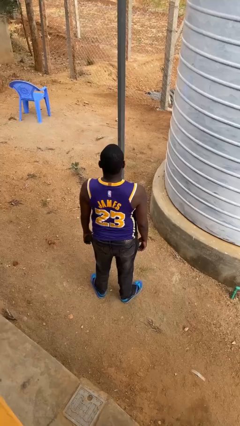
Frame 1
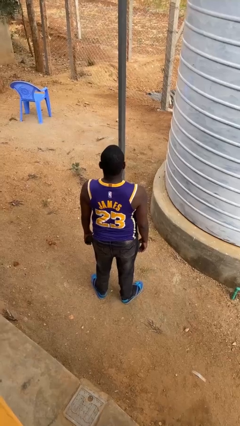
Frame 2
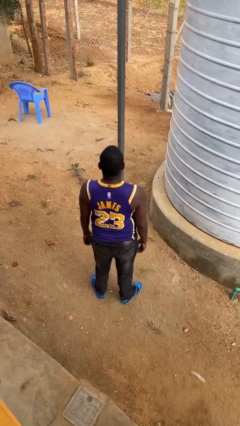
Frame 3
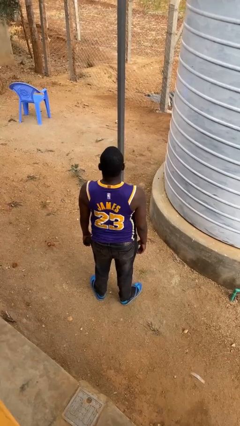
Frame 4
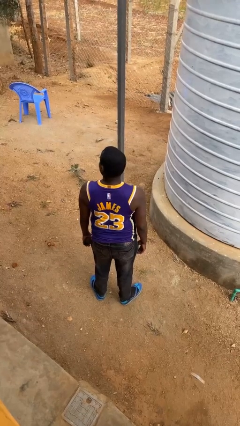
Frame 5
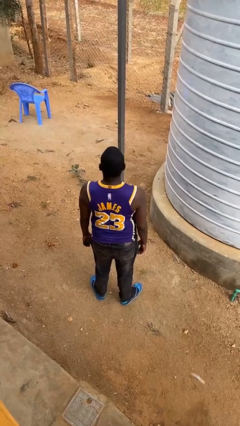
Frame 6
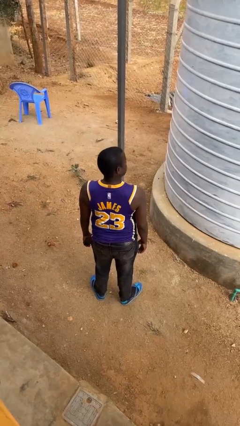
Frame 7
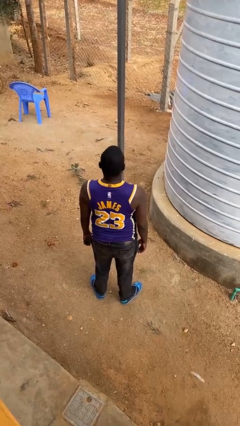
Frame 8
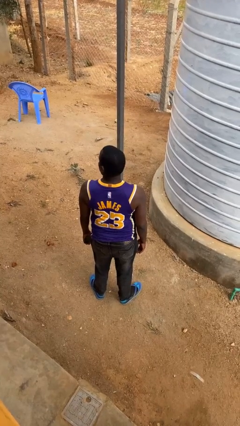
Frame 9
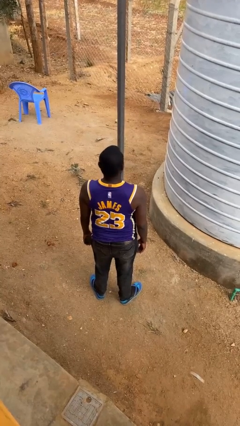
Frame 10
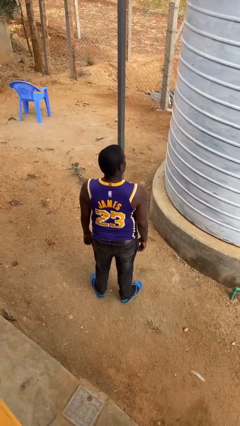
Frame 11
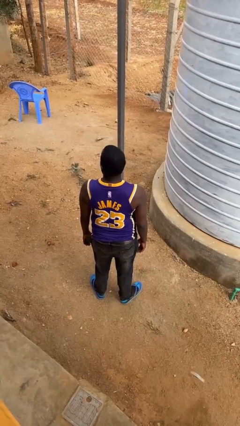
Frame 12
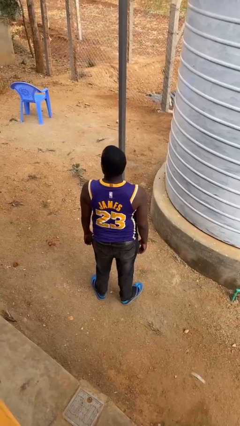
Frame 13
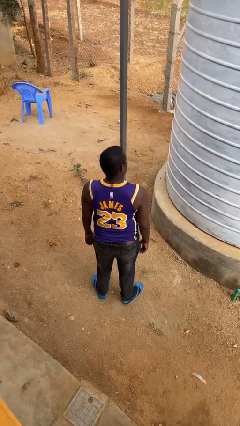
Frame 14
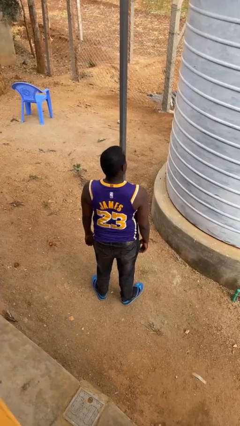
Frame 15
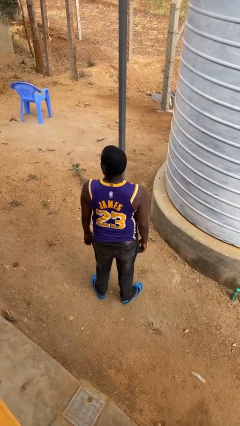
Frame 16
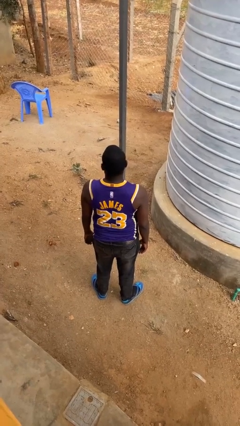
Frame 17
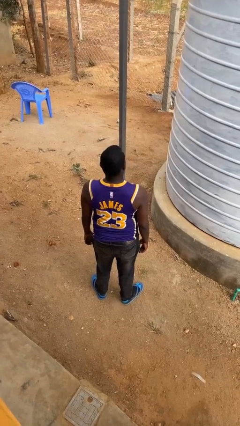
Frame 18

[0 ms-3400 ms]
person shakes head

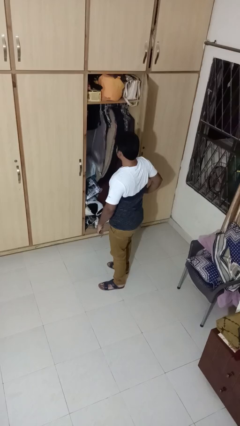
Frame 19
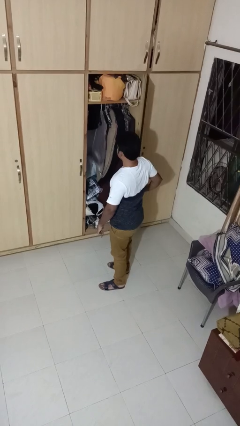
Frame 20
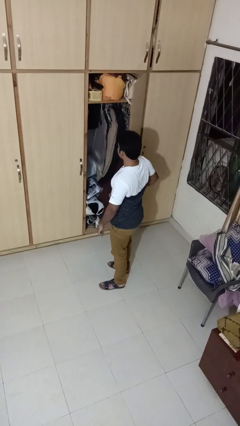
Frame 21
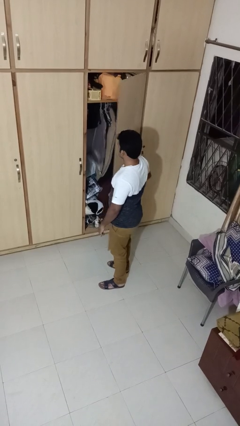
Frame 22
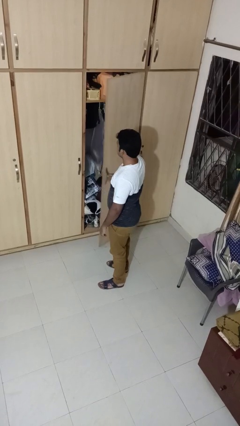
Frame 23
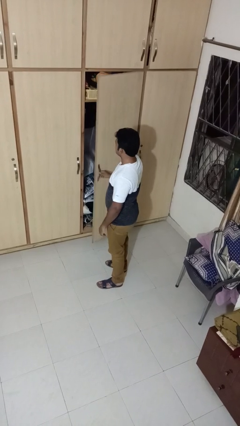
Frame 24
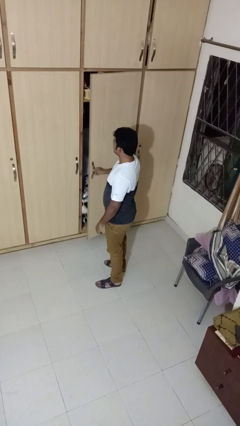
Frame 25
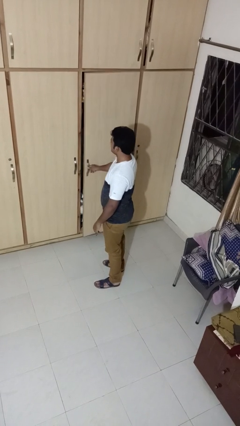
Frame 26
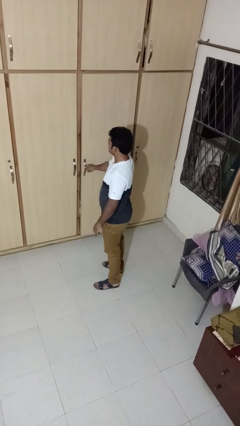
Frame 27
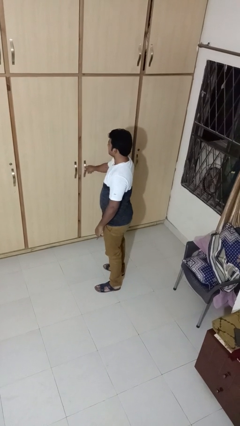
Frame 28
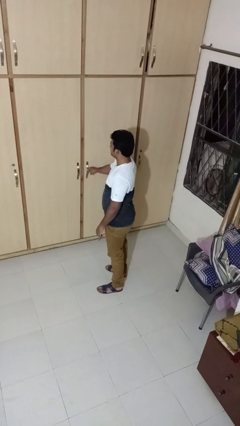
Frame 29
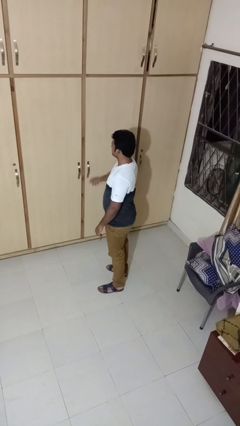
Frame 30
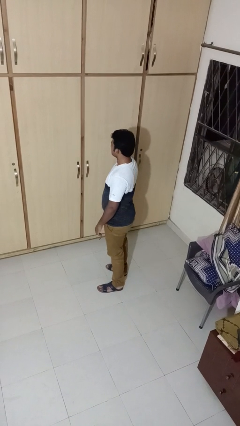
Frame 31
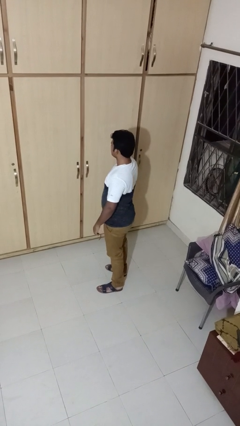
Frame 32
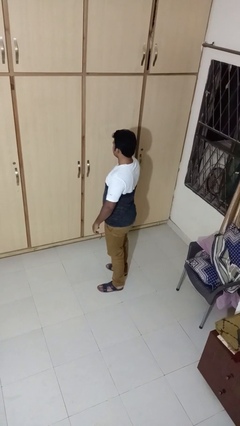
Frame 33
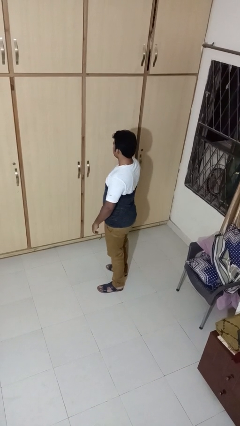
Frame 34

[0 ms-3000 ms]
person closes closet door

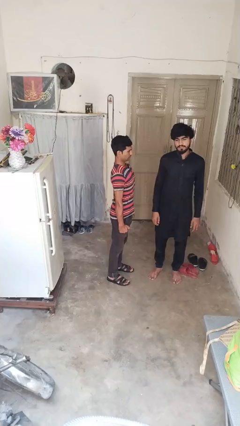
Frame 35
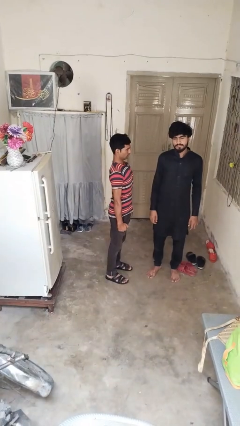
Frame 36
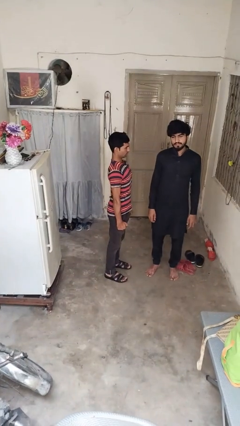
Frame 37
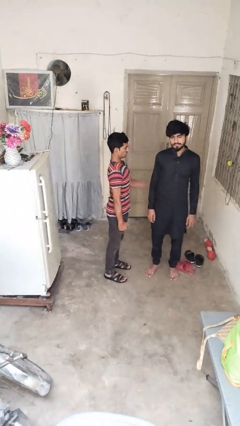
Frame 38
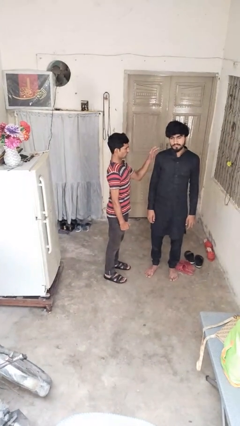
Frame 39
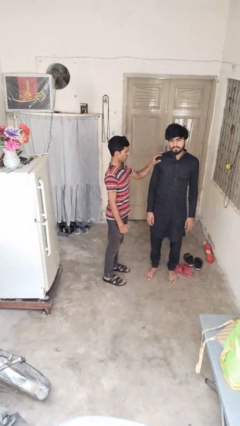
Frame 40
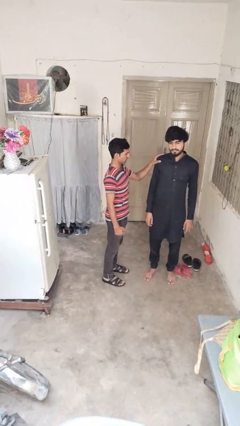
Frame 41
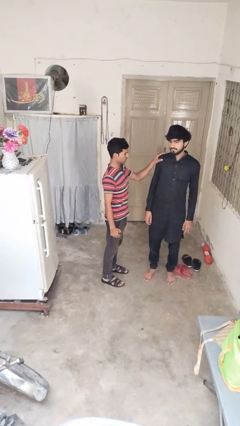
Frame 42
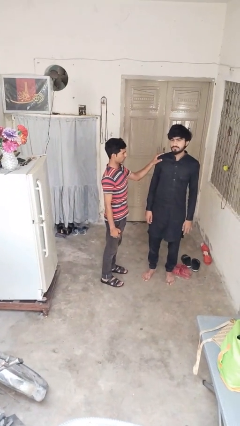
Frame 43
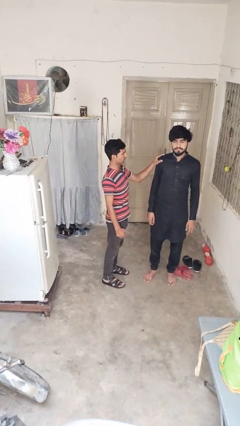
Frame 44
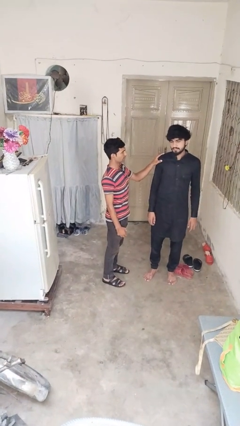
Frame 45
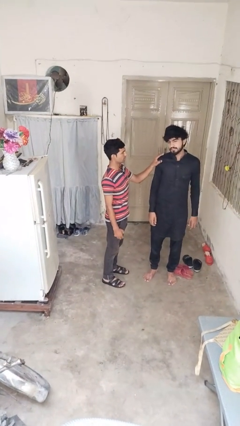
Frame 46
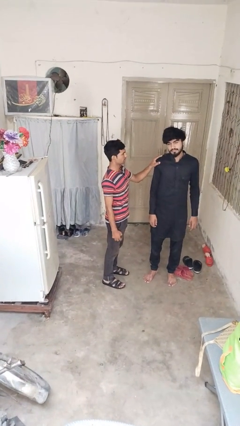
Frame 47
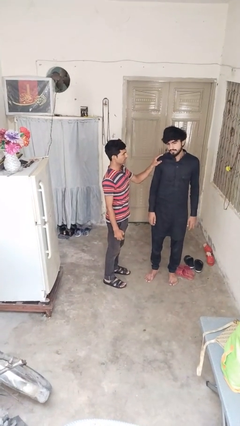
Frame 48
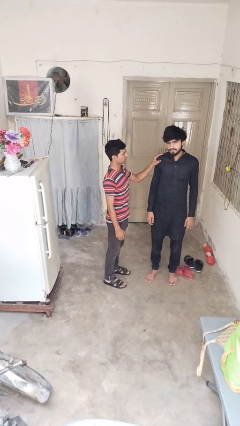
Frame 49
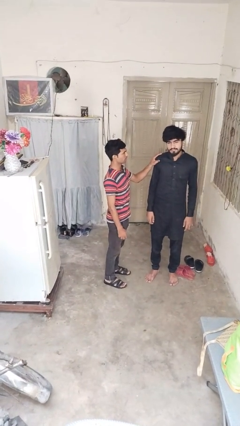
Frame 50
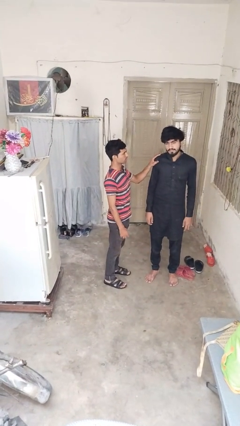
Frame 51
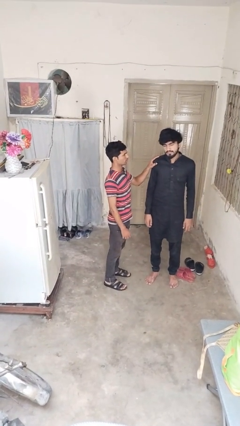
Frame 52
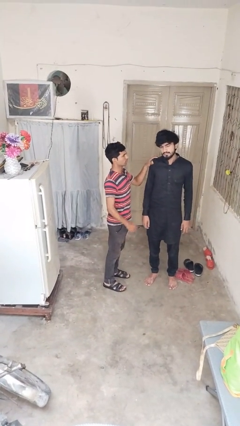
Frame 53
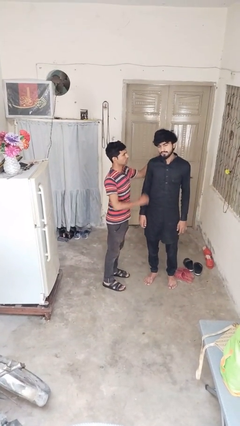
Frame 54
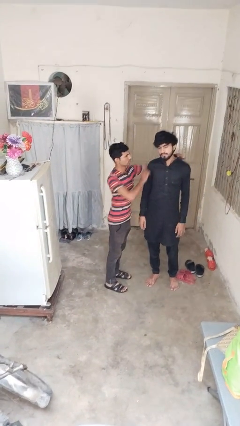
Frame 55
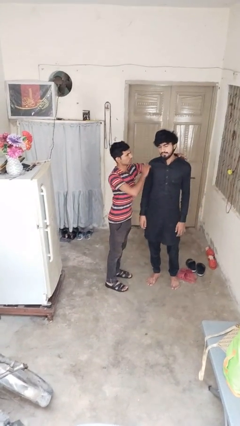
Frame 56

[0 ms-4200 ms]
person grabs person by shoulder

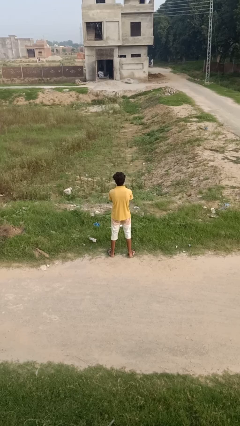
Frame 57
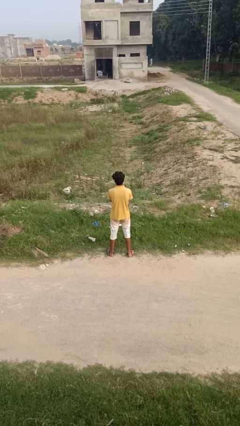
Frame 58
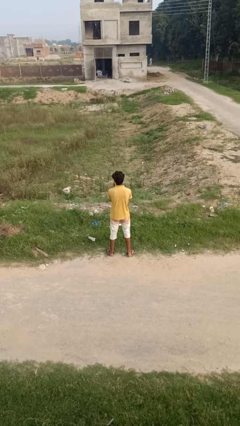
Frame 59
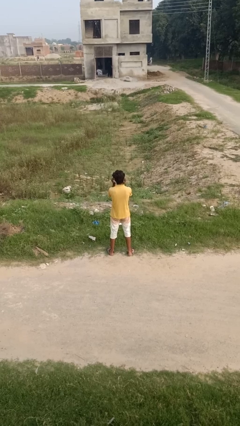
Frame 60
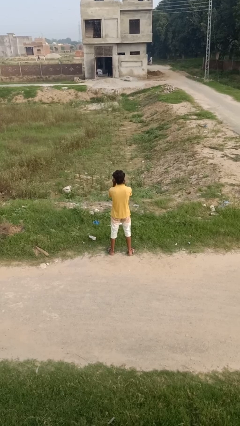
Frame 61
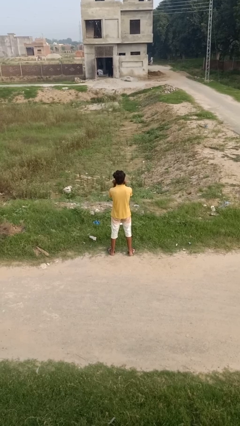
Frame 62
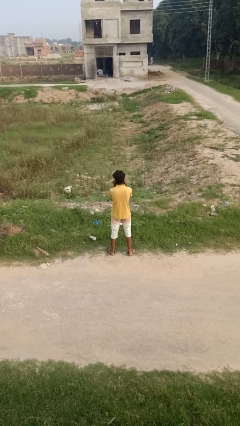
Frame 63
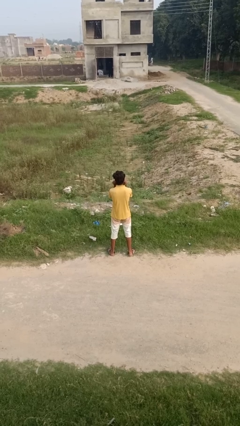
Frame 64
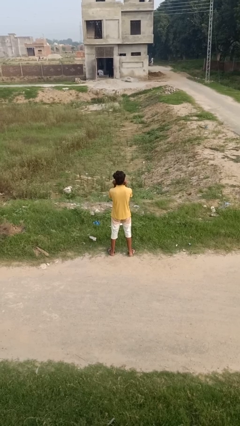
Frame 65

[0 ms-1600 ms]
person touches earlobe

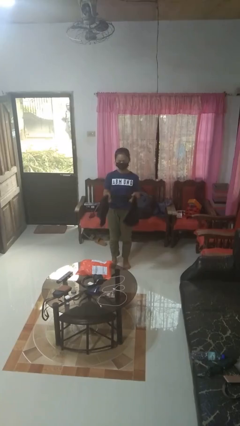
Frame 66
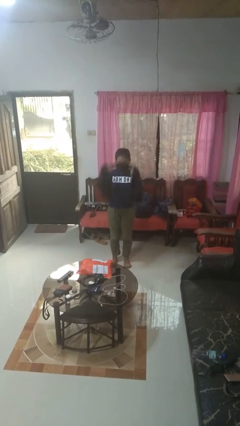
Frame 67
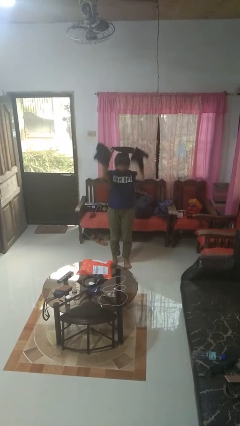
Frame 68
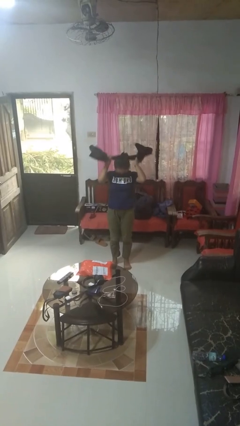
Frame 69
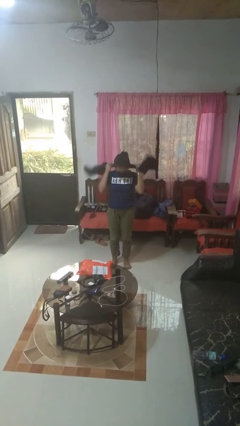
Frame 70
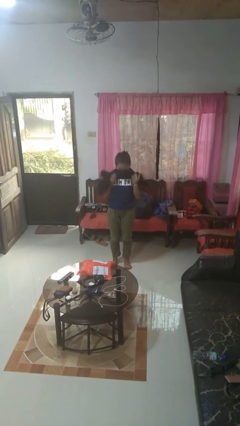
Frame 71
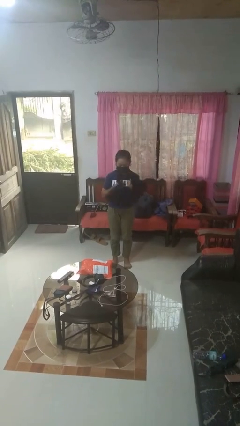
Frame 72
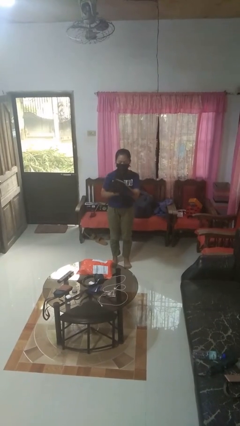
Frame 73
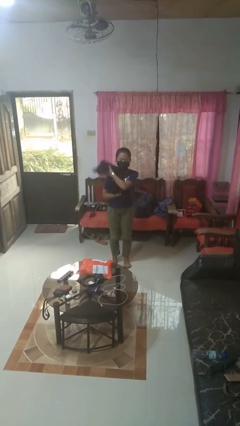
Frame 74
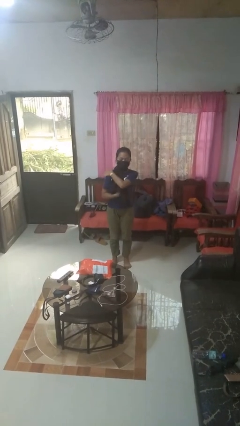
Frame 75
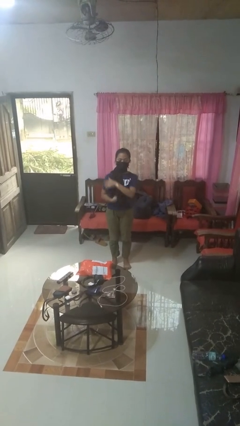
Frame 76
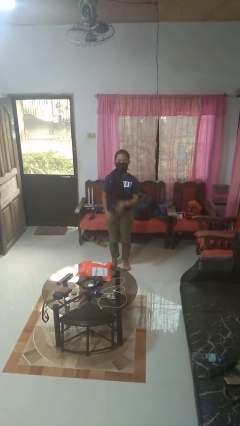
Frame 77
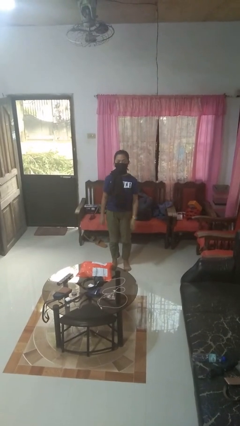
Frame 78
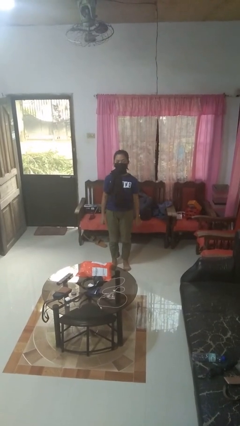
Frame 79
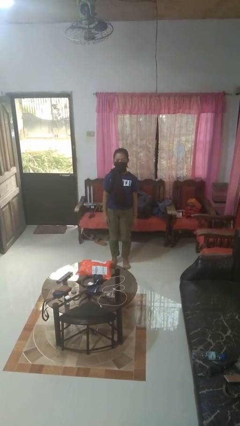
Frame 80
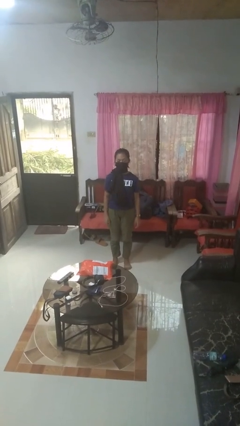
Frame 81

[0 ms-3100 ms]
person puts on scarf

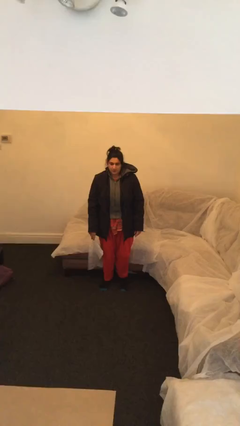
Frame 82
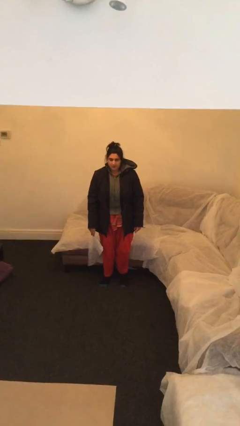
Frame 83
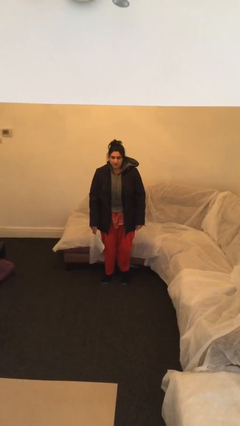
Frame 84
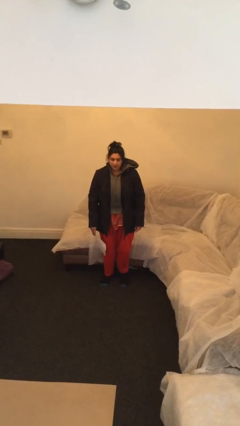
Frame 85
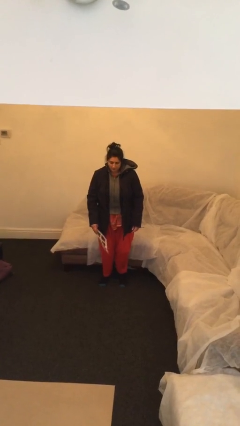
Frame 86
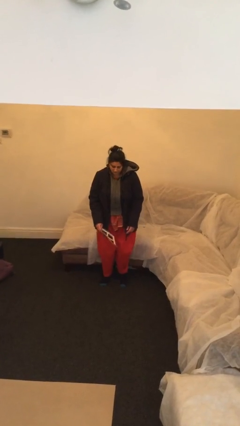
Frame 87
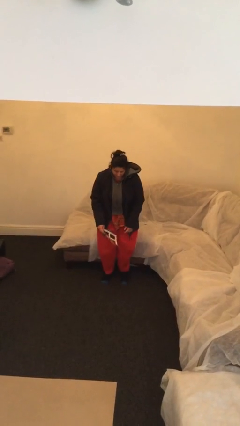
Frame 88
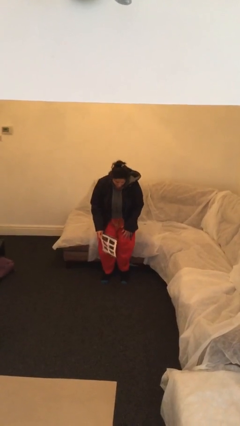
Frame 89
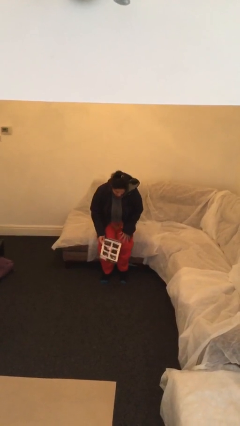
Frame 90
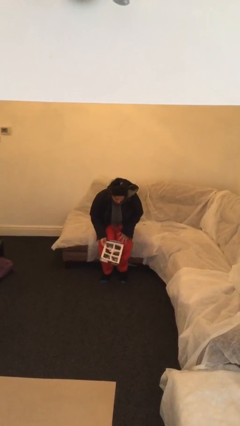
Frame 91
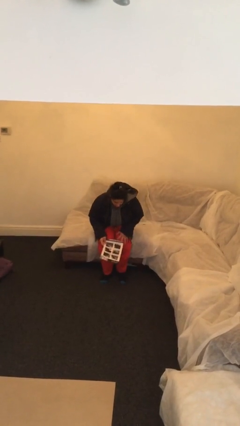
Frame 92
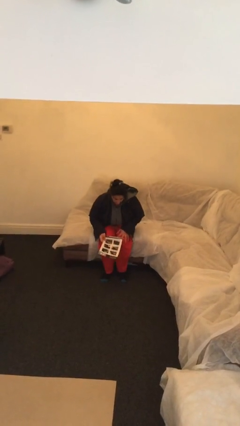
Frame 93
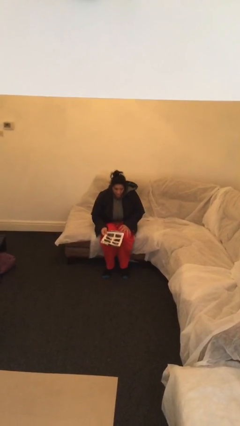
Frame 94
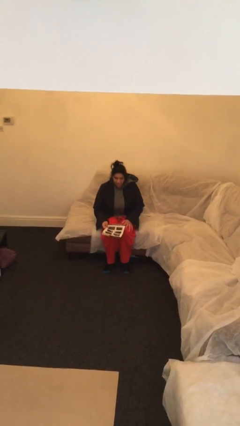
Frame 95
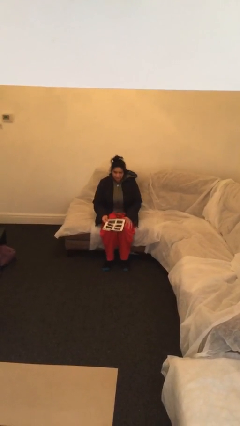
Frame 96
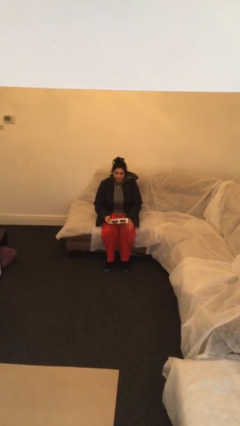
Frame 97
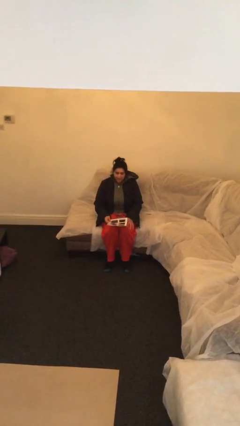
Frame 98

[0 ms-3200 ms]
person sits down
